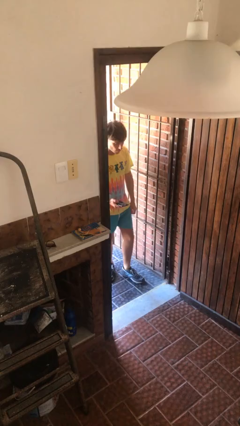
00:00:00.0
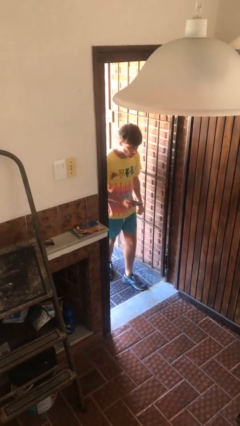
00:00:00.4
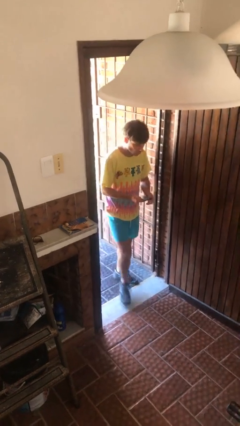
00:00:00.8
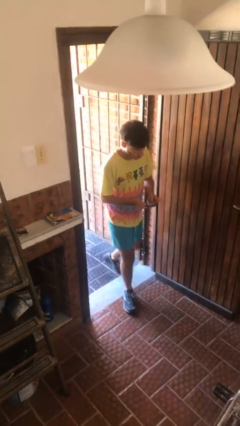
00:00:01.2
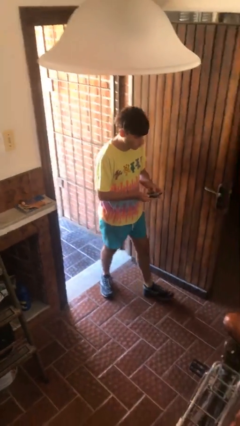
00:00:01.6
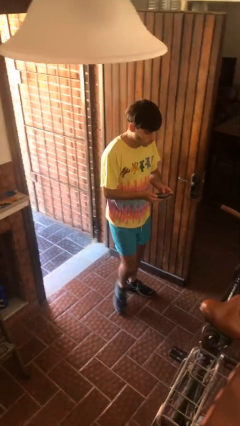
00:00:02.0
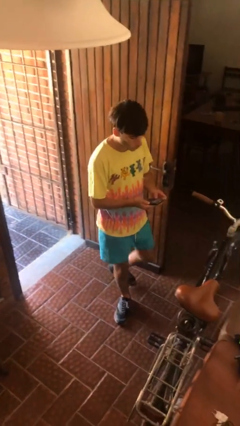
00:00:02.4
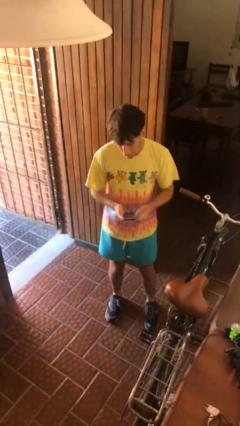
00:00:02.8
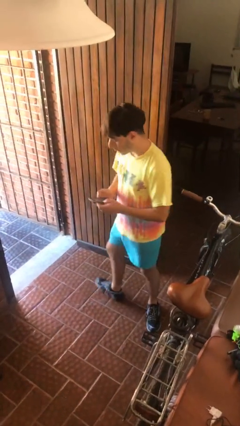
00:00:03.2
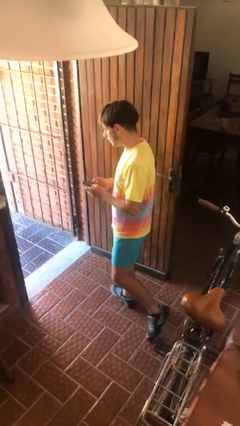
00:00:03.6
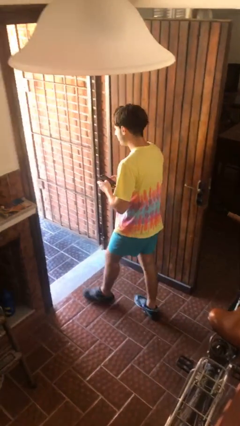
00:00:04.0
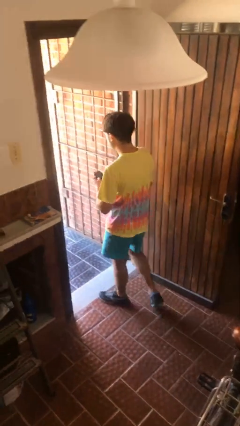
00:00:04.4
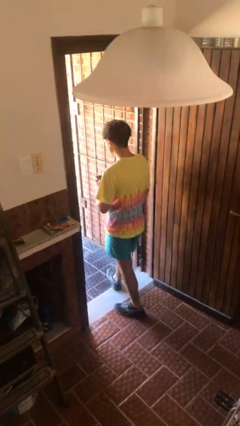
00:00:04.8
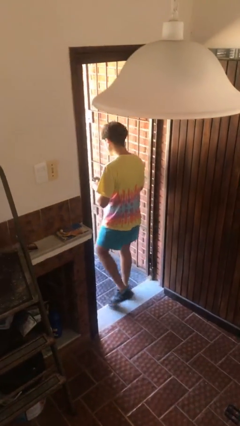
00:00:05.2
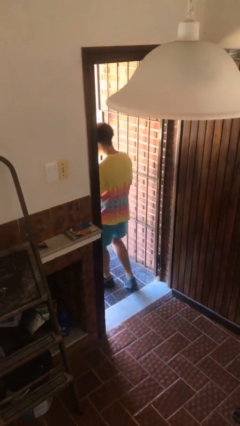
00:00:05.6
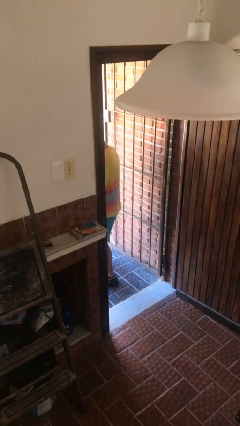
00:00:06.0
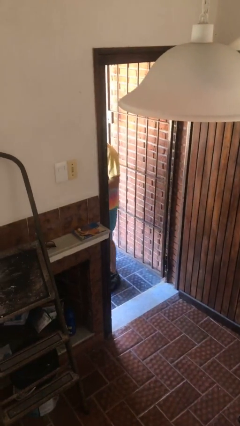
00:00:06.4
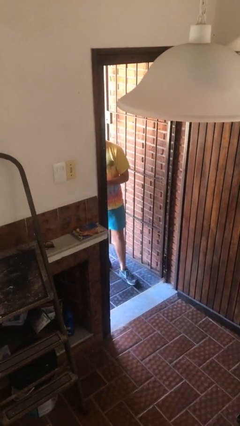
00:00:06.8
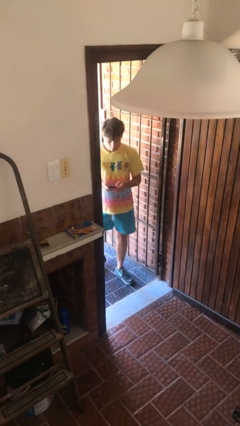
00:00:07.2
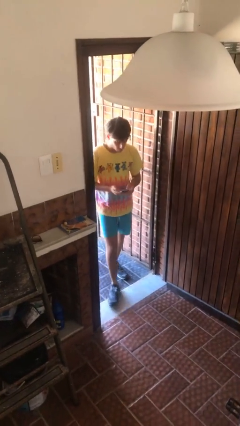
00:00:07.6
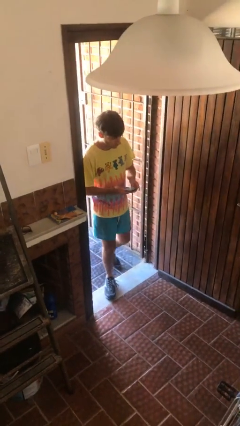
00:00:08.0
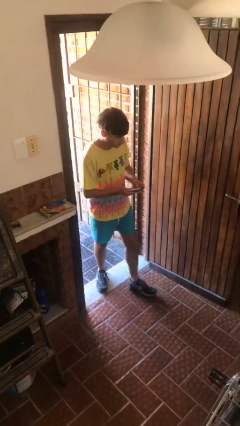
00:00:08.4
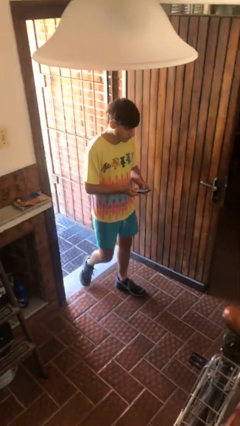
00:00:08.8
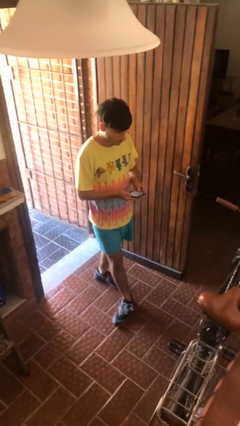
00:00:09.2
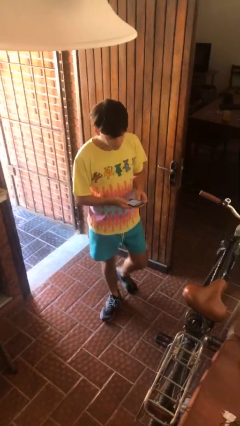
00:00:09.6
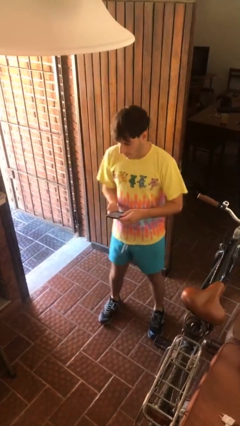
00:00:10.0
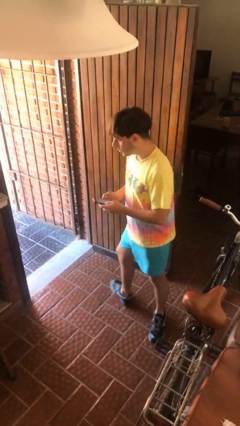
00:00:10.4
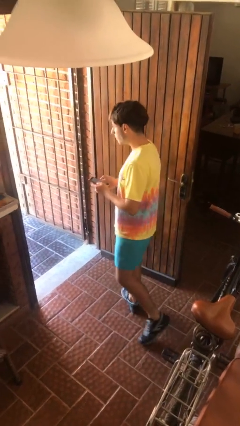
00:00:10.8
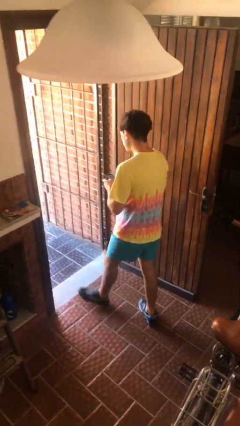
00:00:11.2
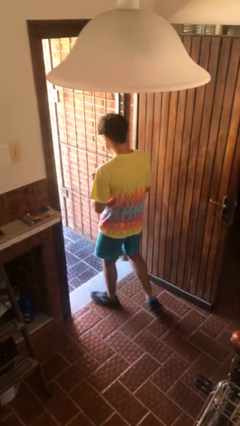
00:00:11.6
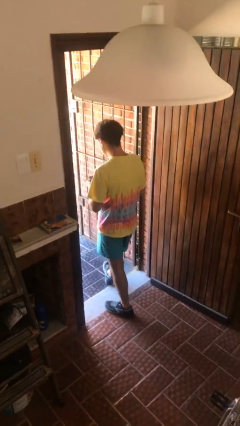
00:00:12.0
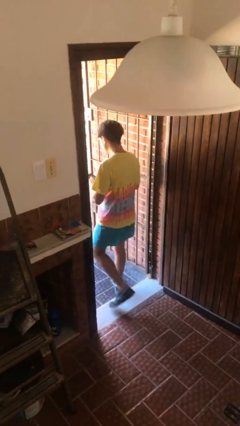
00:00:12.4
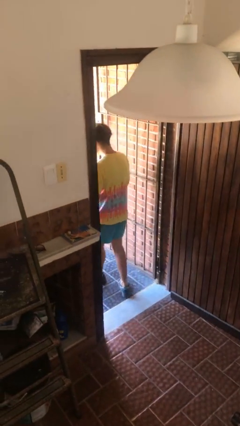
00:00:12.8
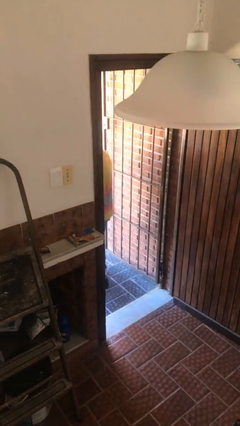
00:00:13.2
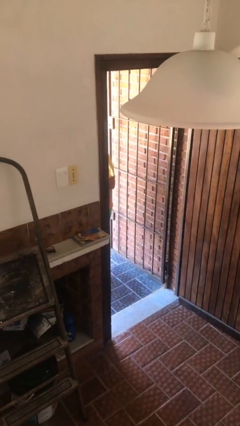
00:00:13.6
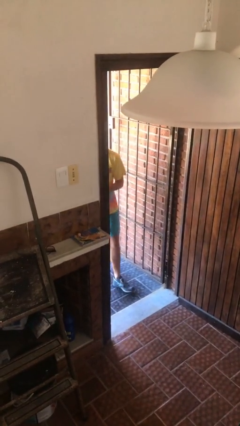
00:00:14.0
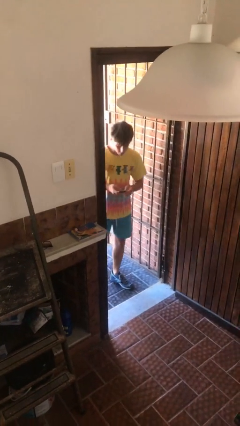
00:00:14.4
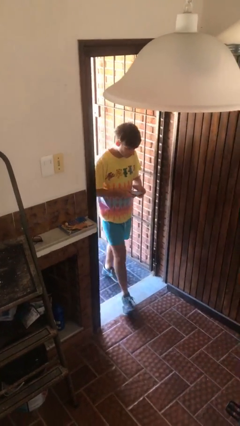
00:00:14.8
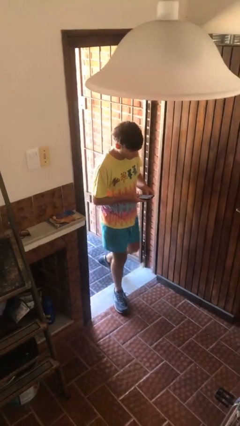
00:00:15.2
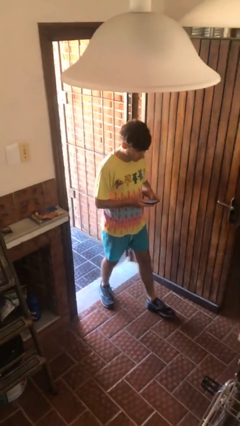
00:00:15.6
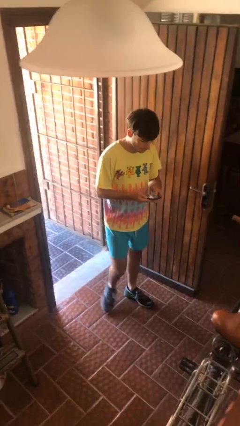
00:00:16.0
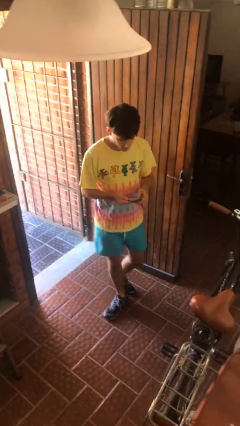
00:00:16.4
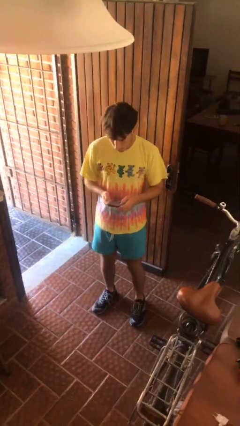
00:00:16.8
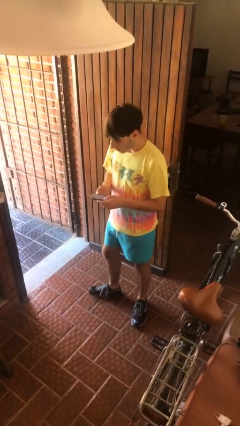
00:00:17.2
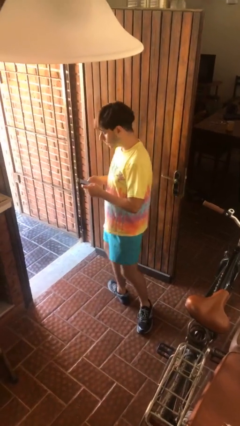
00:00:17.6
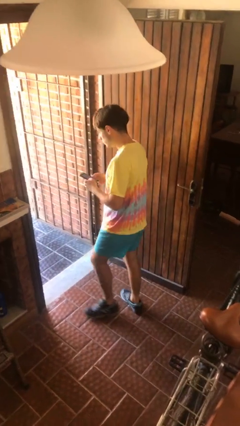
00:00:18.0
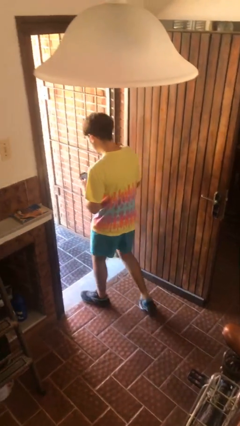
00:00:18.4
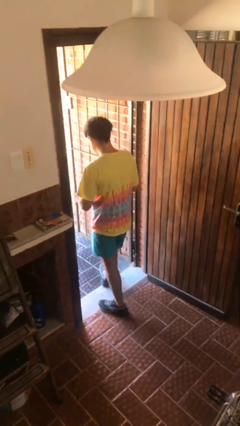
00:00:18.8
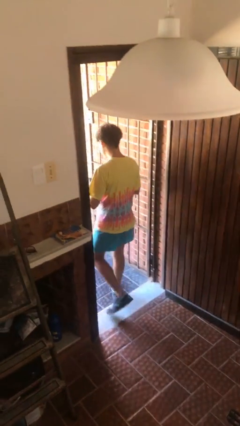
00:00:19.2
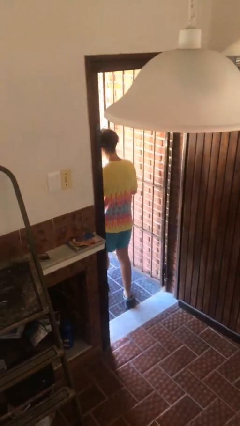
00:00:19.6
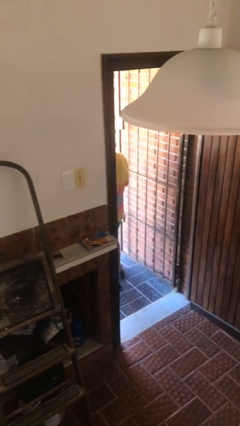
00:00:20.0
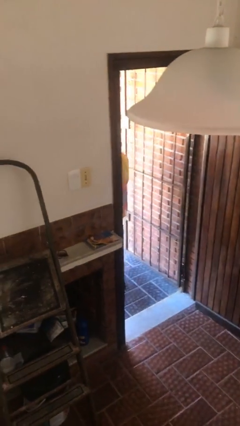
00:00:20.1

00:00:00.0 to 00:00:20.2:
person texts on phone

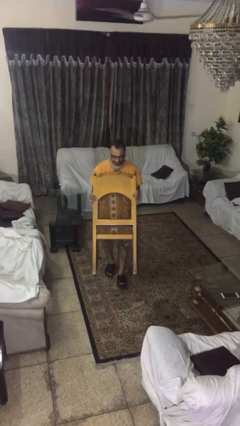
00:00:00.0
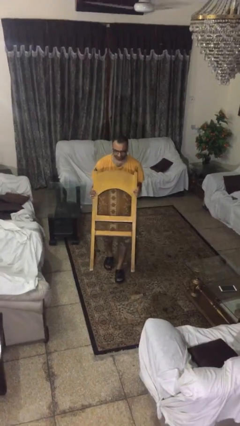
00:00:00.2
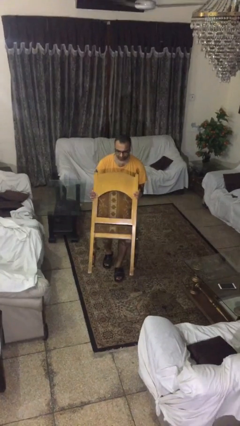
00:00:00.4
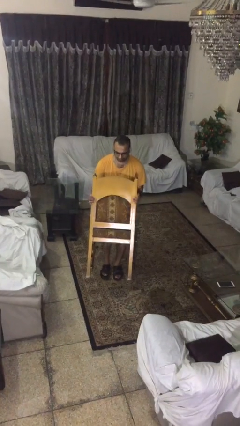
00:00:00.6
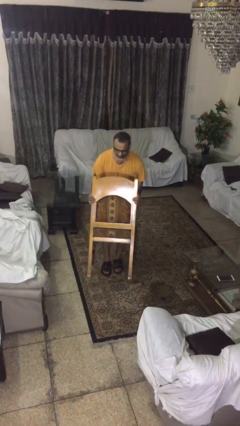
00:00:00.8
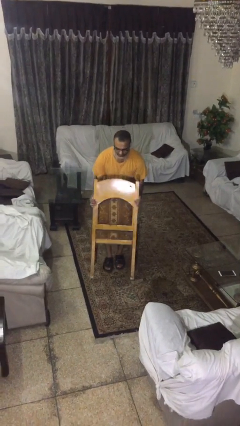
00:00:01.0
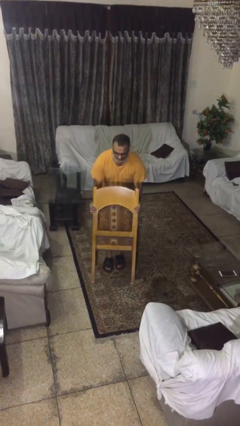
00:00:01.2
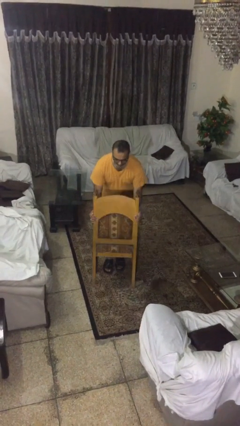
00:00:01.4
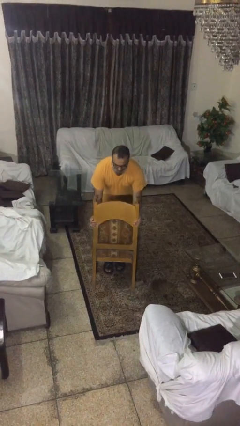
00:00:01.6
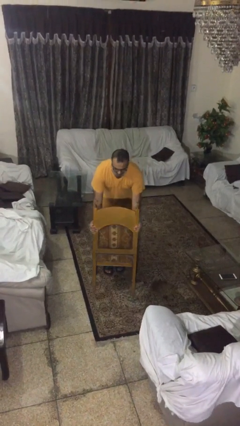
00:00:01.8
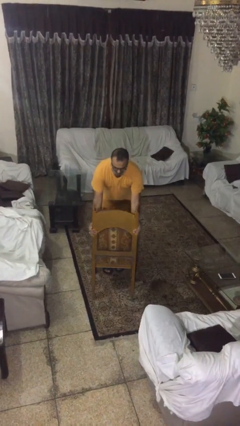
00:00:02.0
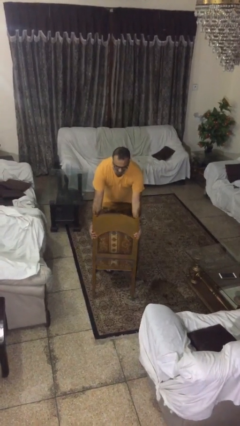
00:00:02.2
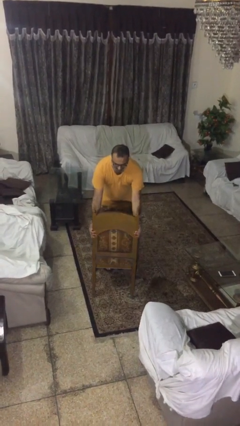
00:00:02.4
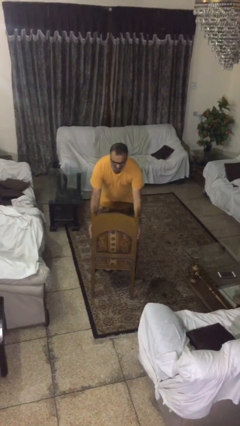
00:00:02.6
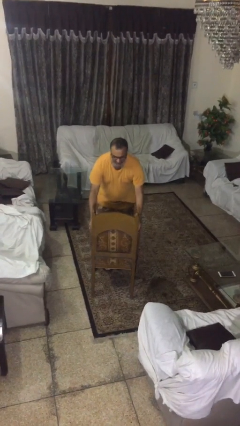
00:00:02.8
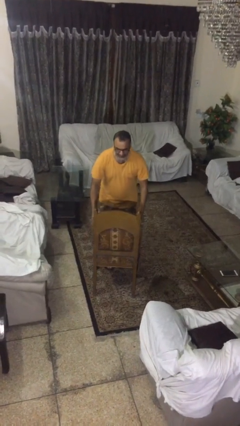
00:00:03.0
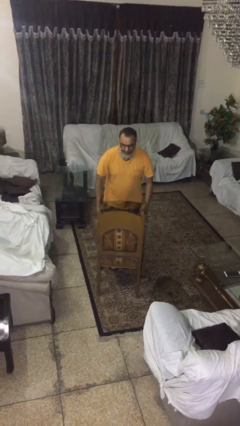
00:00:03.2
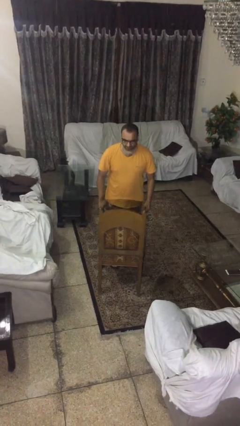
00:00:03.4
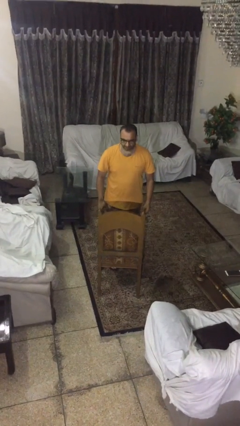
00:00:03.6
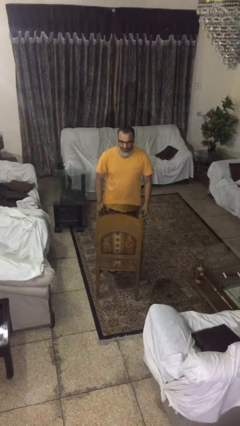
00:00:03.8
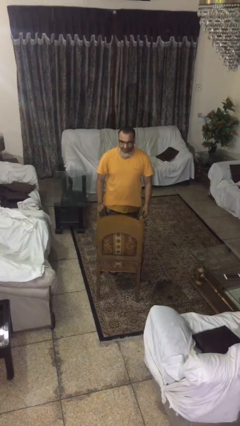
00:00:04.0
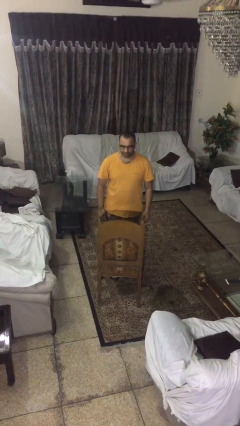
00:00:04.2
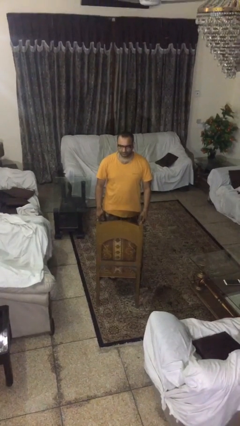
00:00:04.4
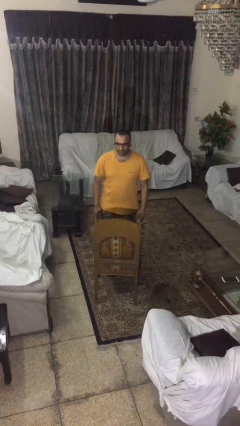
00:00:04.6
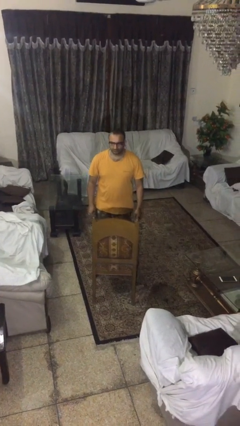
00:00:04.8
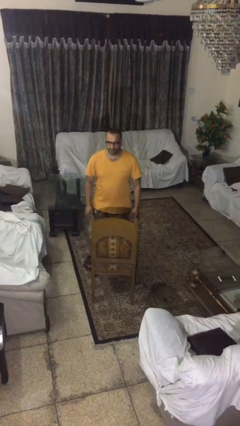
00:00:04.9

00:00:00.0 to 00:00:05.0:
person puts down object on floor

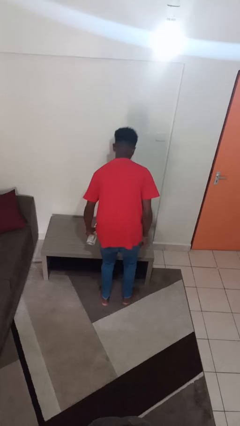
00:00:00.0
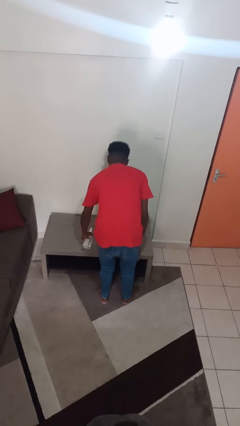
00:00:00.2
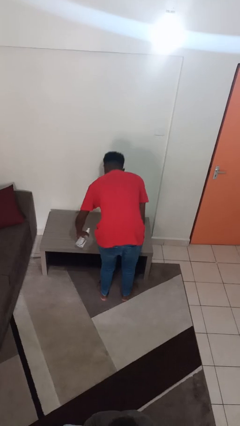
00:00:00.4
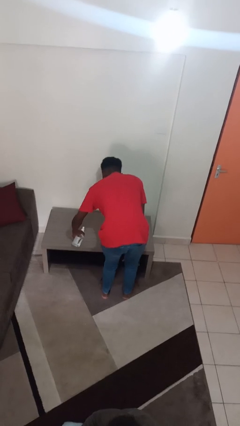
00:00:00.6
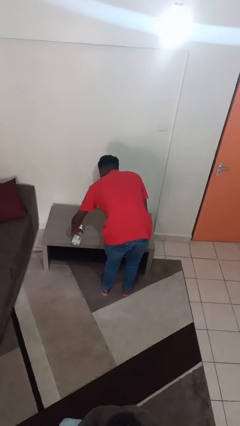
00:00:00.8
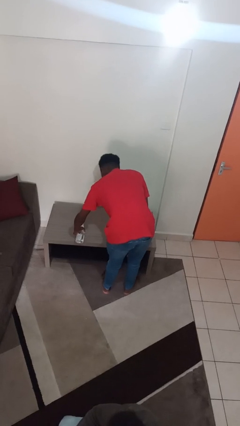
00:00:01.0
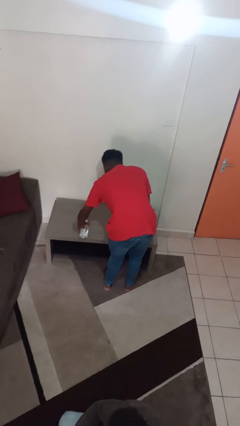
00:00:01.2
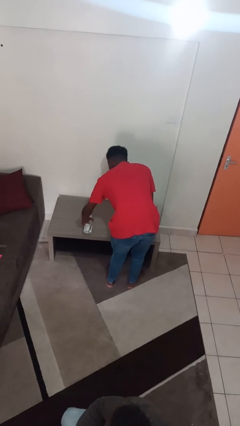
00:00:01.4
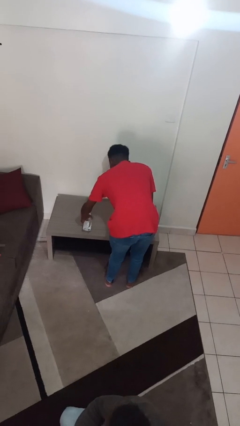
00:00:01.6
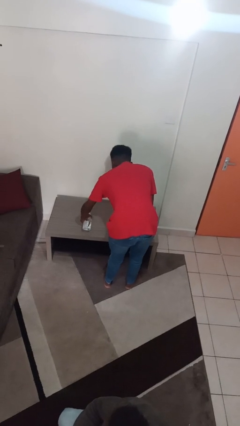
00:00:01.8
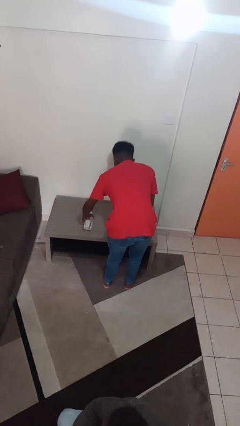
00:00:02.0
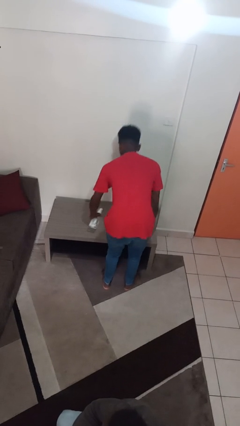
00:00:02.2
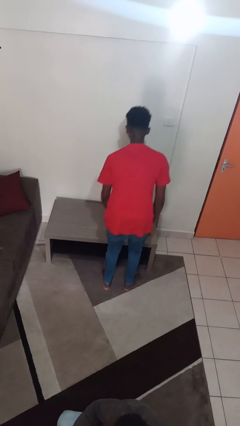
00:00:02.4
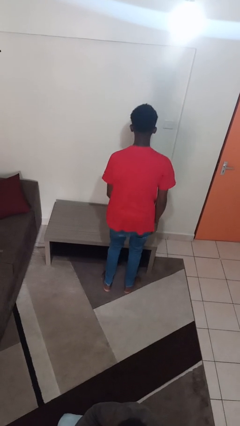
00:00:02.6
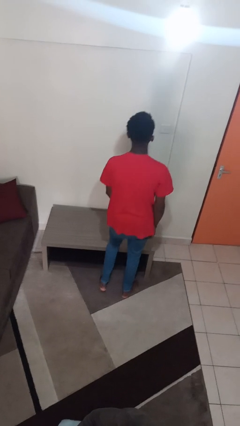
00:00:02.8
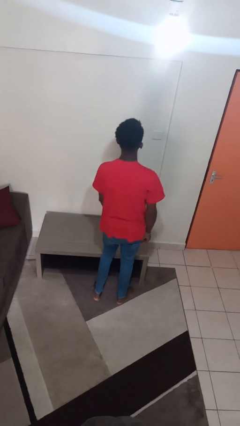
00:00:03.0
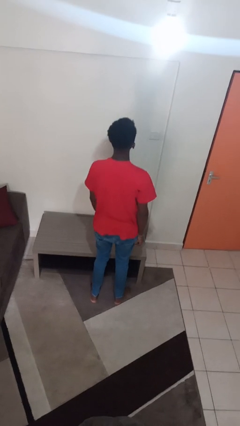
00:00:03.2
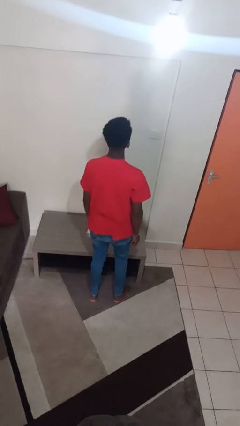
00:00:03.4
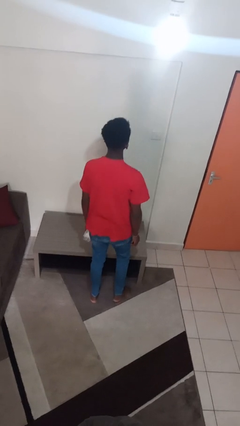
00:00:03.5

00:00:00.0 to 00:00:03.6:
person sprays from bottle
